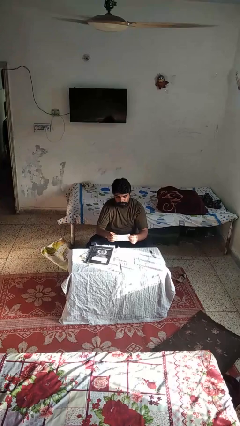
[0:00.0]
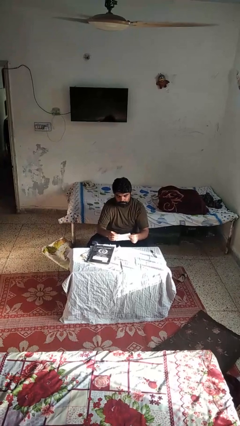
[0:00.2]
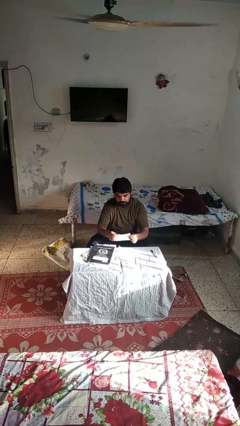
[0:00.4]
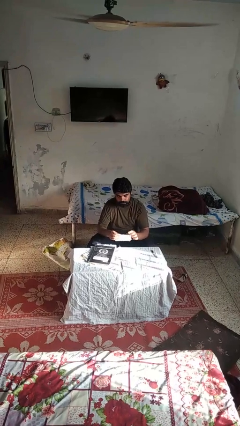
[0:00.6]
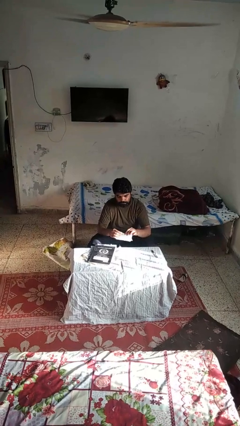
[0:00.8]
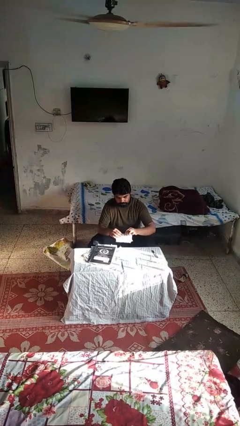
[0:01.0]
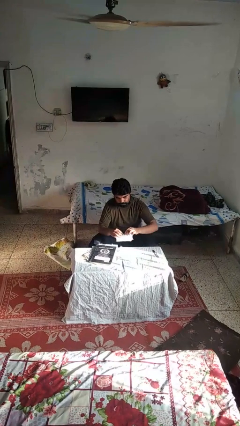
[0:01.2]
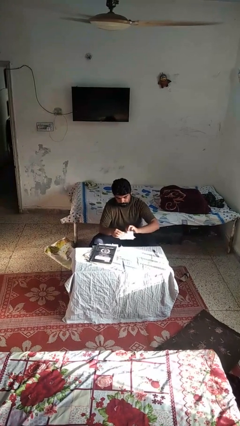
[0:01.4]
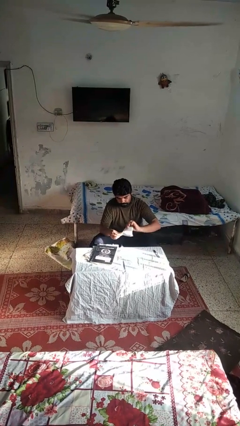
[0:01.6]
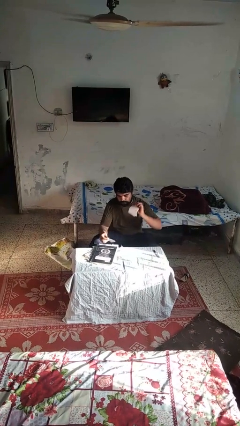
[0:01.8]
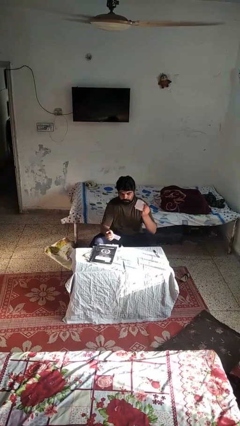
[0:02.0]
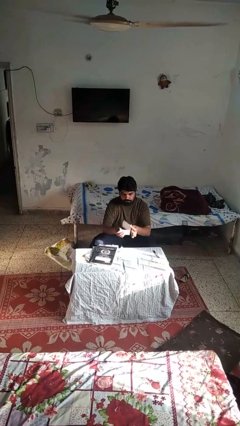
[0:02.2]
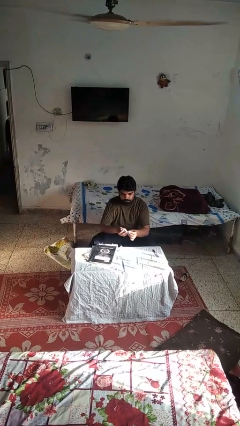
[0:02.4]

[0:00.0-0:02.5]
person tears paper

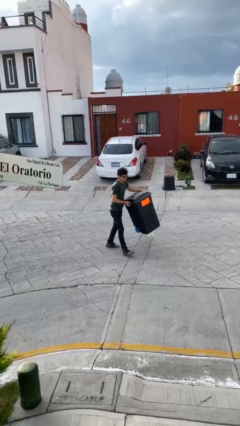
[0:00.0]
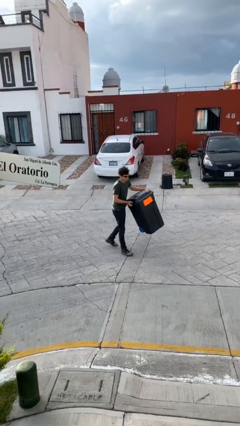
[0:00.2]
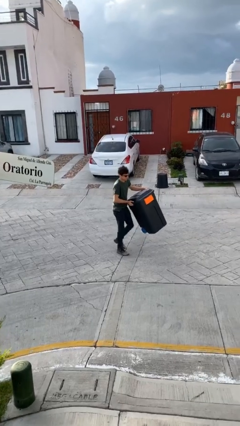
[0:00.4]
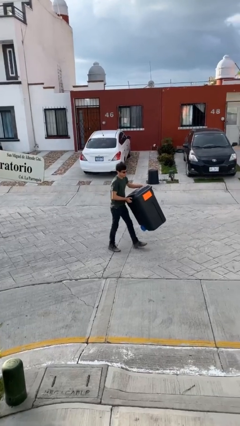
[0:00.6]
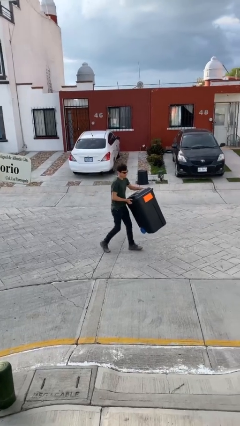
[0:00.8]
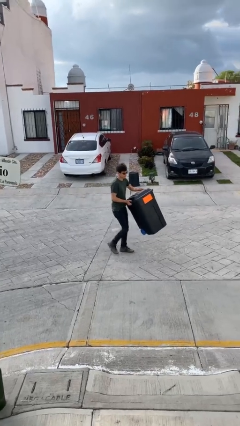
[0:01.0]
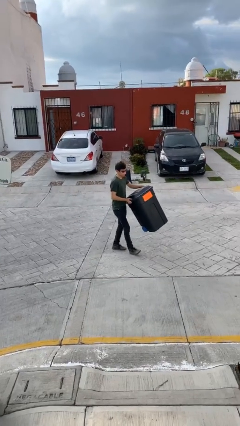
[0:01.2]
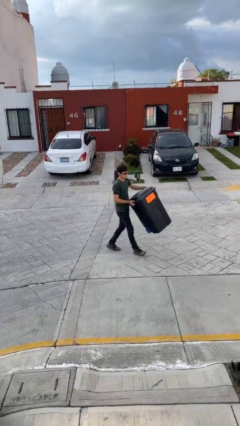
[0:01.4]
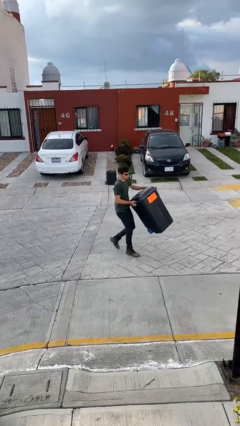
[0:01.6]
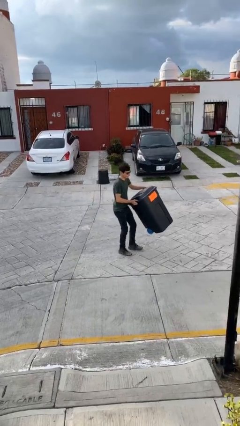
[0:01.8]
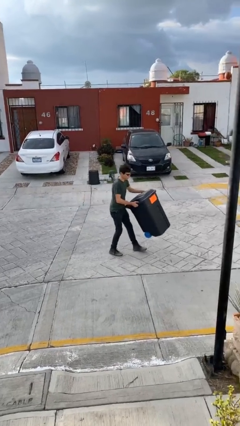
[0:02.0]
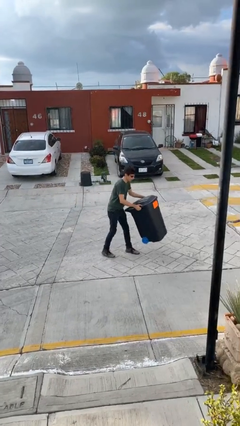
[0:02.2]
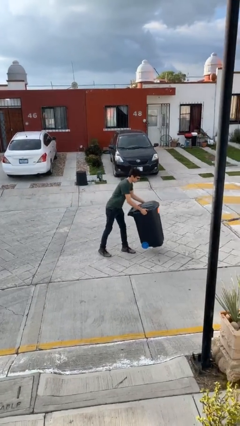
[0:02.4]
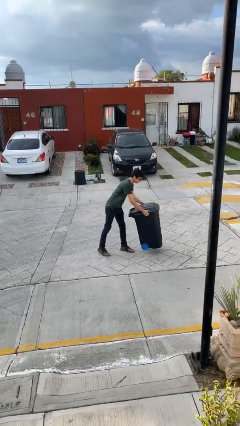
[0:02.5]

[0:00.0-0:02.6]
person carries heavy object

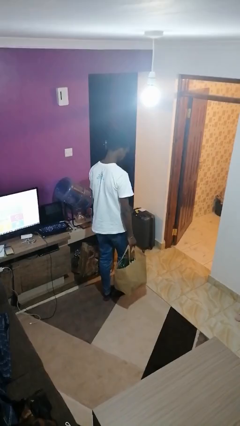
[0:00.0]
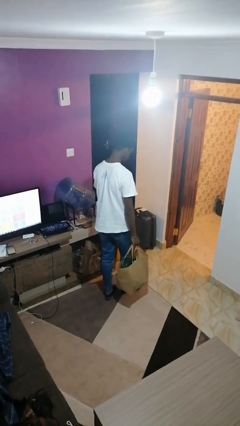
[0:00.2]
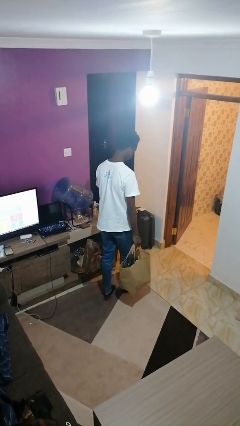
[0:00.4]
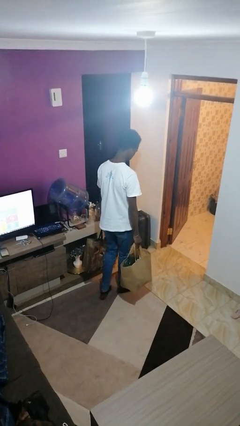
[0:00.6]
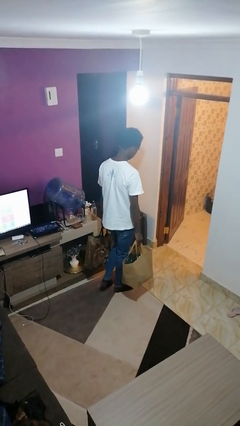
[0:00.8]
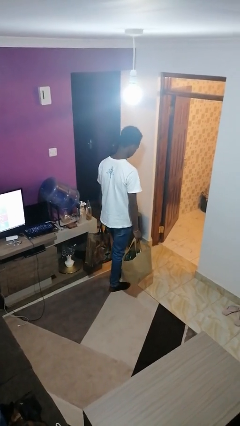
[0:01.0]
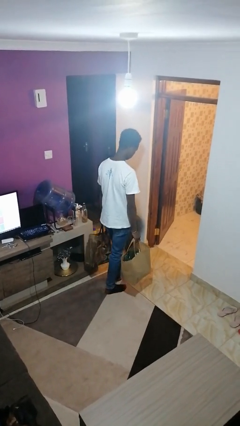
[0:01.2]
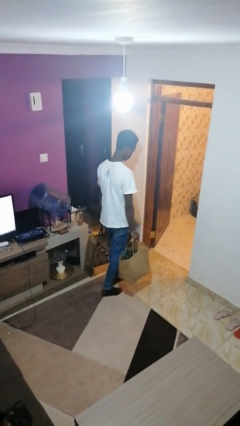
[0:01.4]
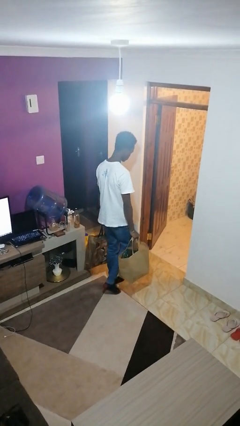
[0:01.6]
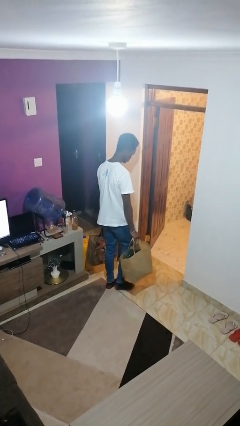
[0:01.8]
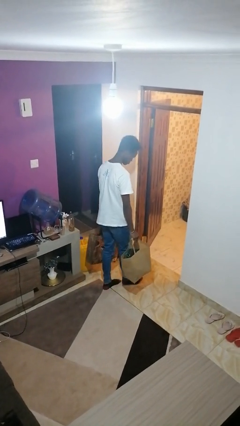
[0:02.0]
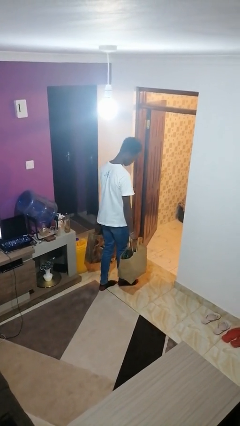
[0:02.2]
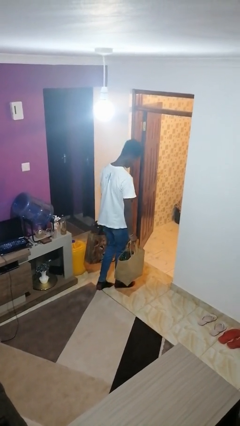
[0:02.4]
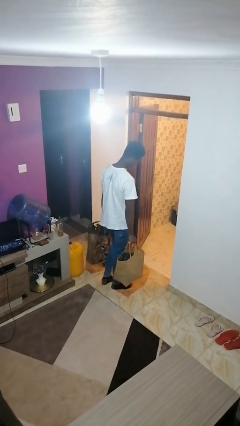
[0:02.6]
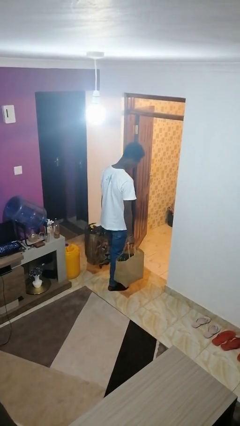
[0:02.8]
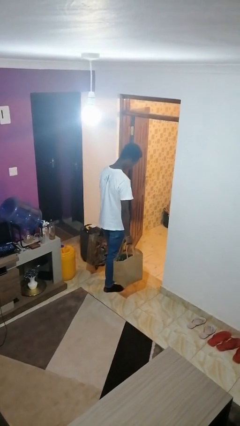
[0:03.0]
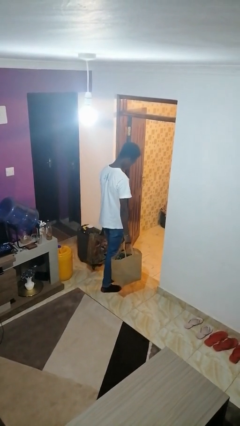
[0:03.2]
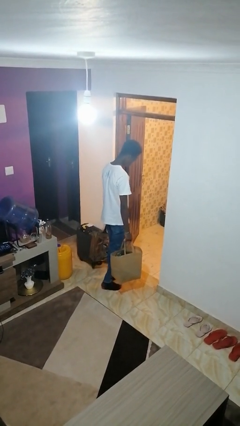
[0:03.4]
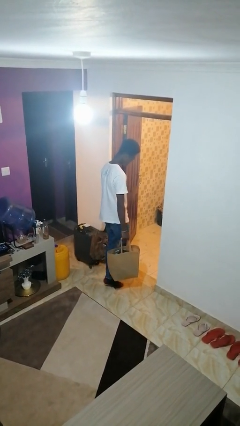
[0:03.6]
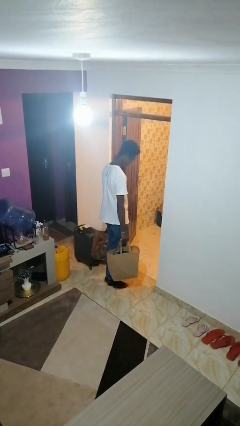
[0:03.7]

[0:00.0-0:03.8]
person carries groceries

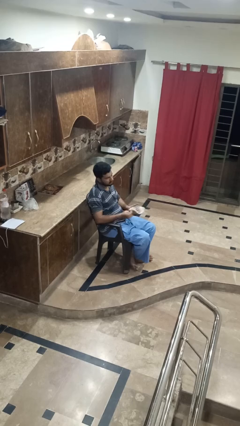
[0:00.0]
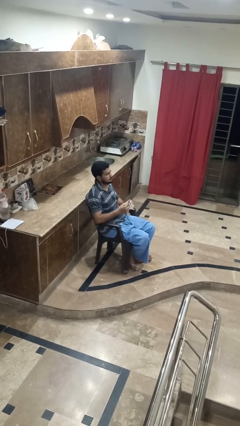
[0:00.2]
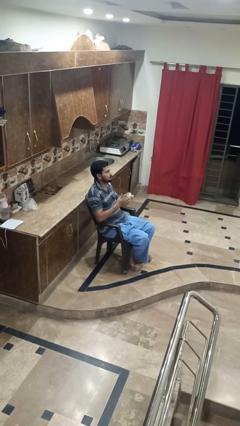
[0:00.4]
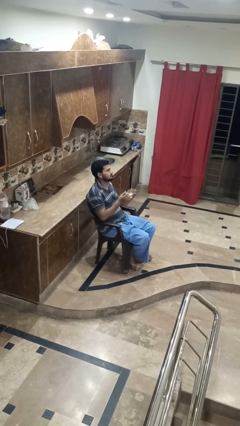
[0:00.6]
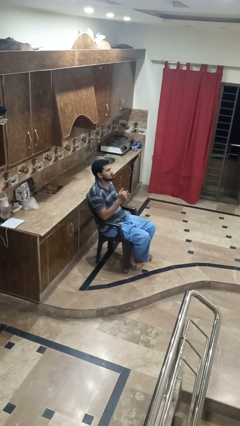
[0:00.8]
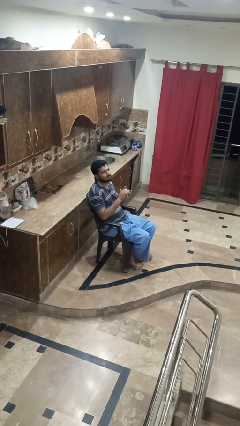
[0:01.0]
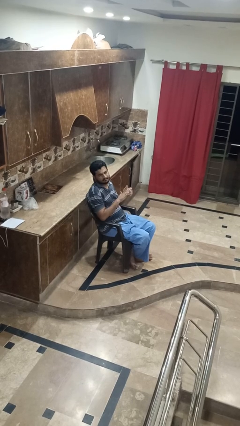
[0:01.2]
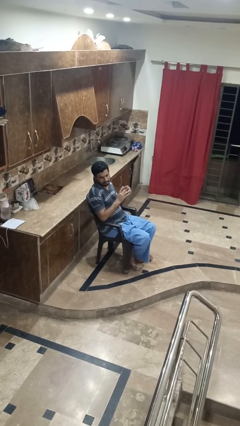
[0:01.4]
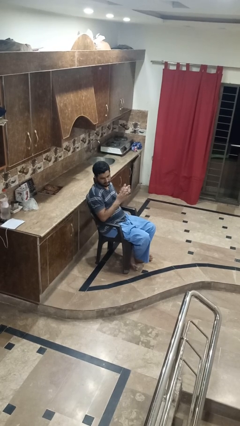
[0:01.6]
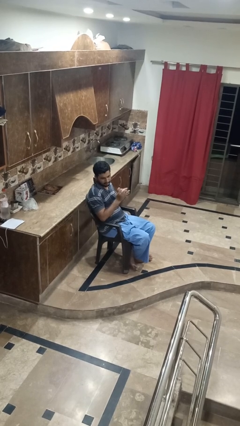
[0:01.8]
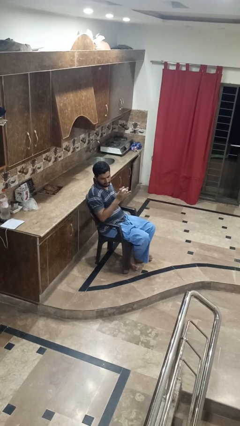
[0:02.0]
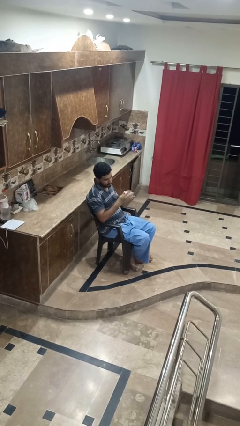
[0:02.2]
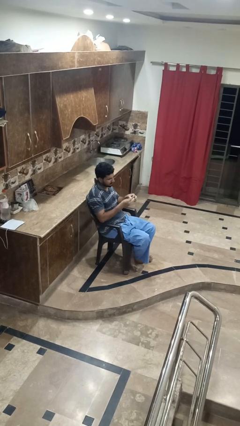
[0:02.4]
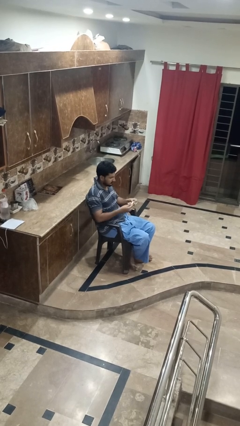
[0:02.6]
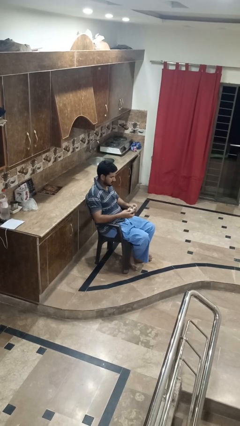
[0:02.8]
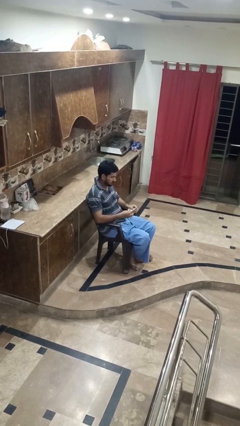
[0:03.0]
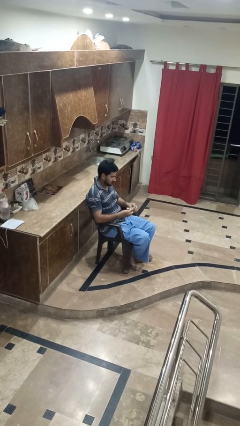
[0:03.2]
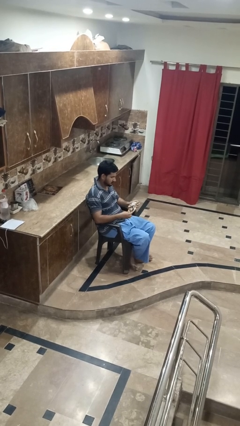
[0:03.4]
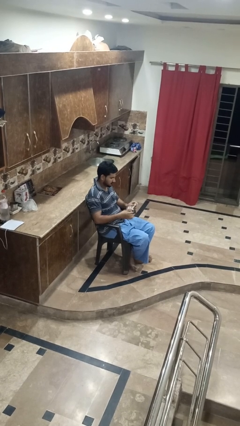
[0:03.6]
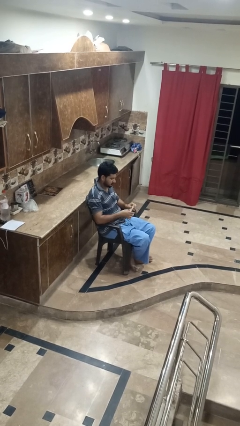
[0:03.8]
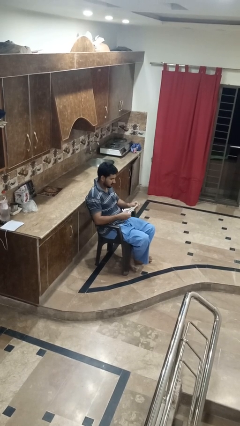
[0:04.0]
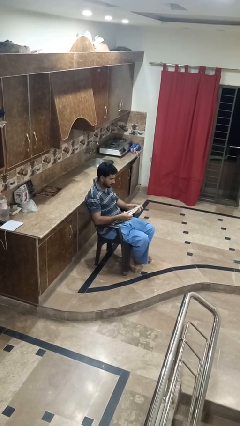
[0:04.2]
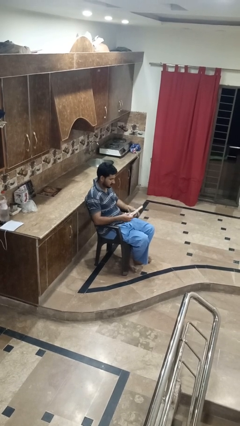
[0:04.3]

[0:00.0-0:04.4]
person crumples paper

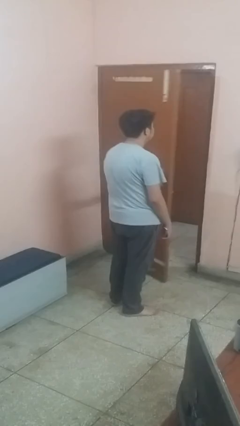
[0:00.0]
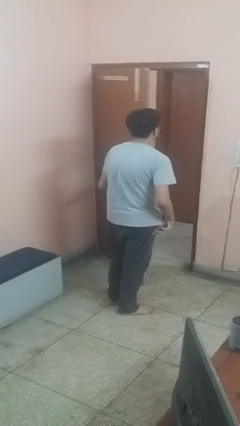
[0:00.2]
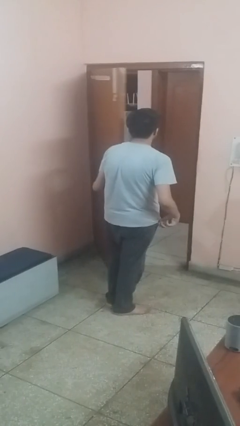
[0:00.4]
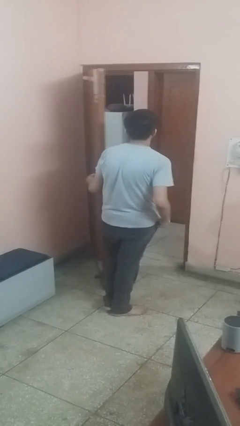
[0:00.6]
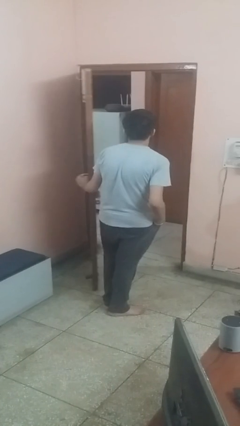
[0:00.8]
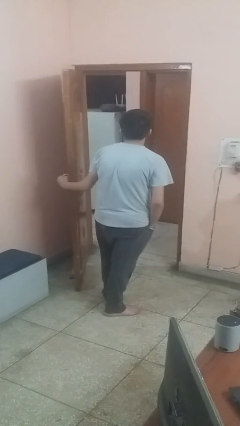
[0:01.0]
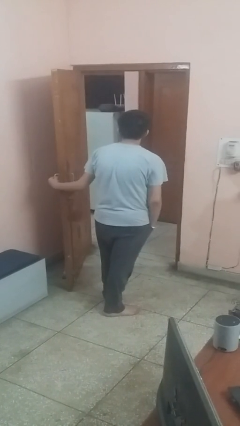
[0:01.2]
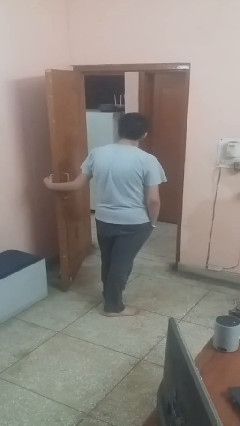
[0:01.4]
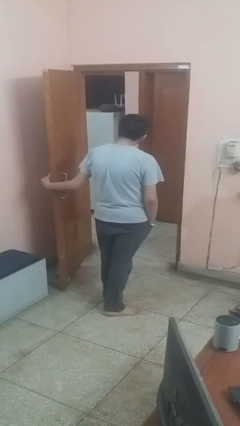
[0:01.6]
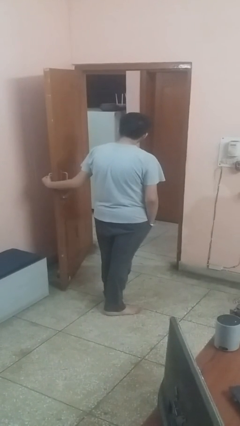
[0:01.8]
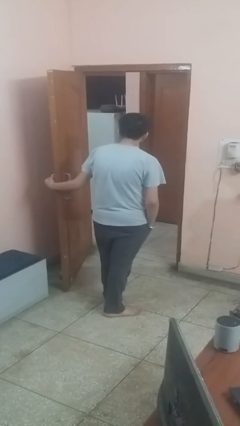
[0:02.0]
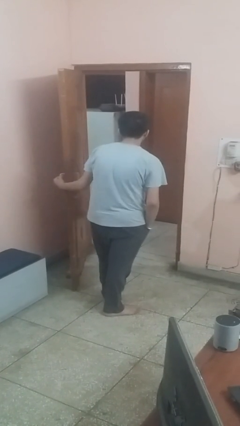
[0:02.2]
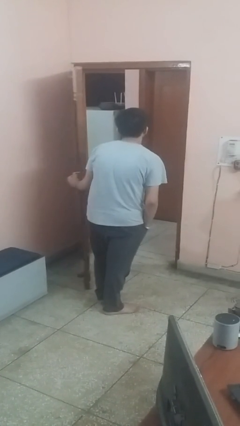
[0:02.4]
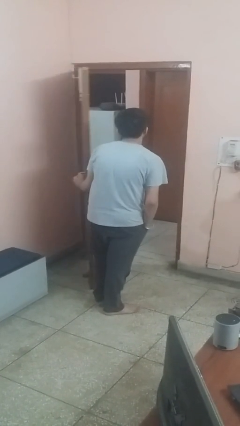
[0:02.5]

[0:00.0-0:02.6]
person opens facility door

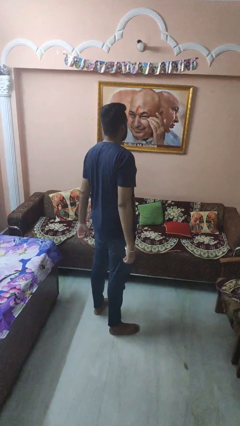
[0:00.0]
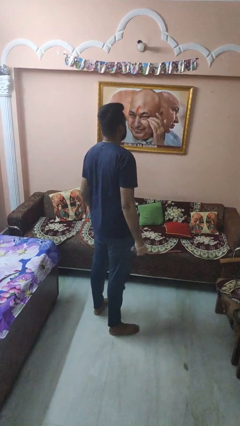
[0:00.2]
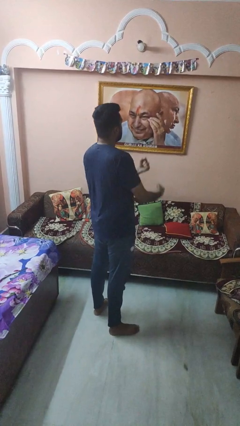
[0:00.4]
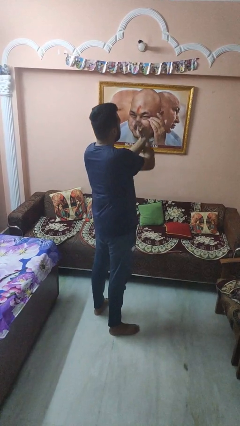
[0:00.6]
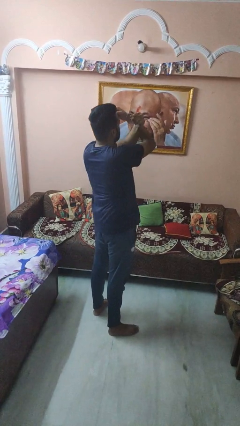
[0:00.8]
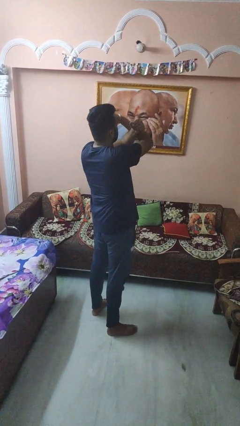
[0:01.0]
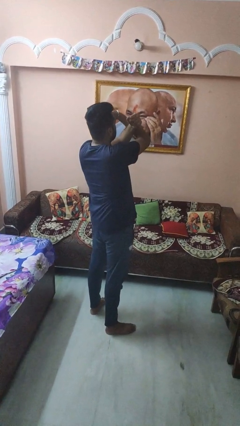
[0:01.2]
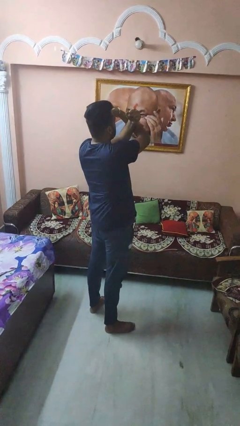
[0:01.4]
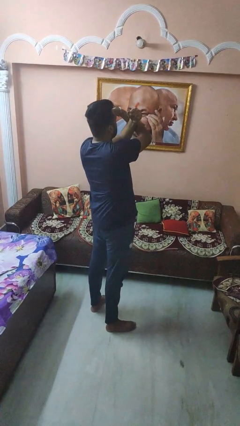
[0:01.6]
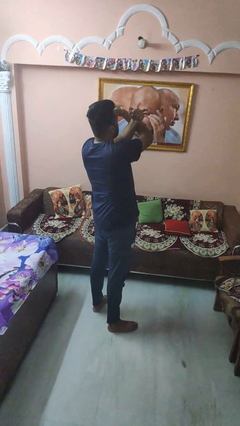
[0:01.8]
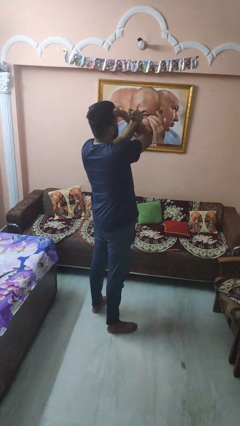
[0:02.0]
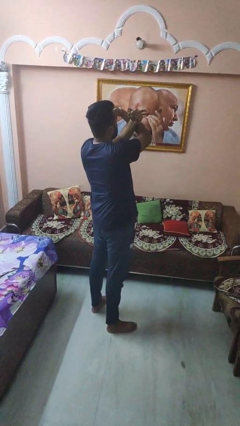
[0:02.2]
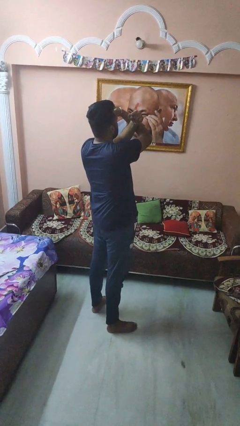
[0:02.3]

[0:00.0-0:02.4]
person gestures arms x
